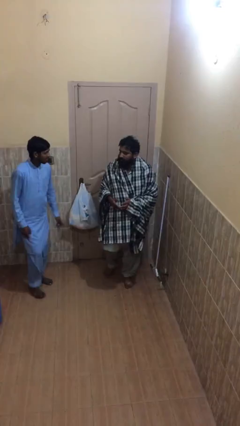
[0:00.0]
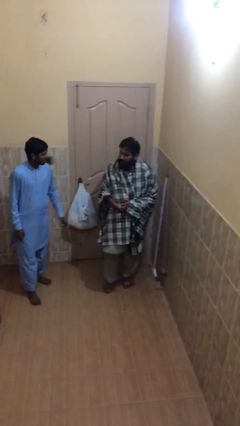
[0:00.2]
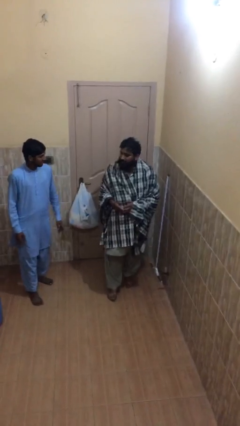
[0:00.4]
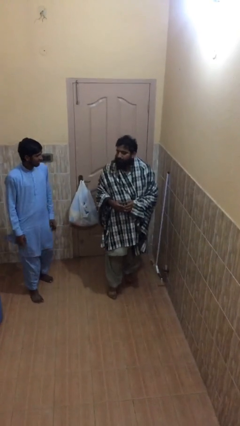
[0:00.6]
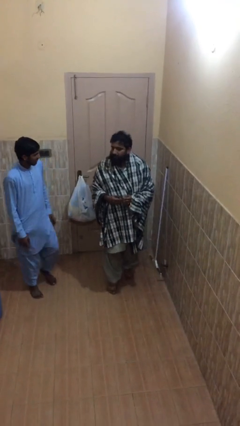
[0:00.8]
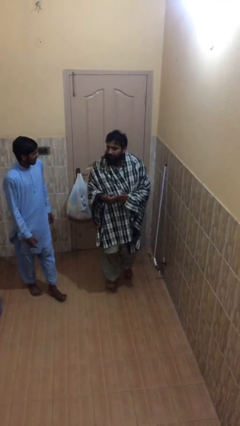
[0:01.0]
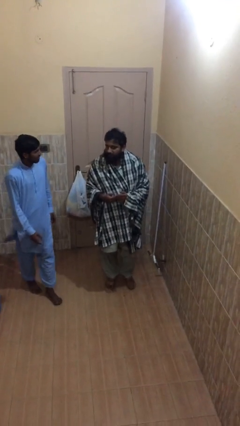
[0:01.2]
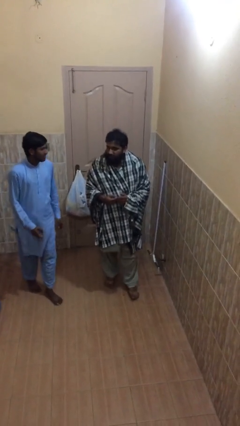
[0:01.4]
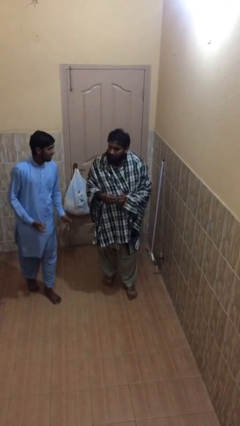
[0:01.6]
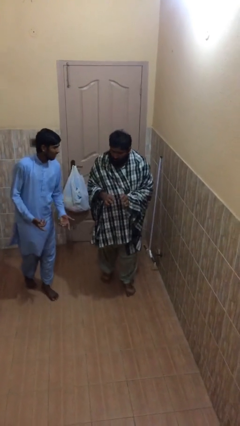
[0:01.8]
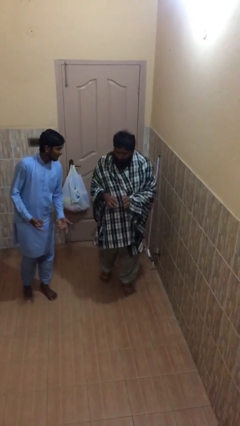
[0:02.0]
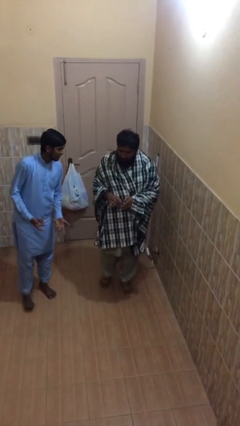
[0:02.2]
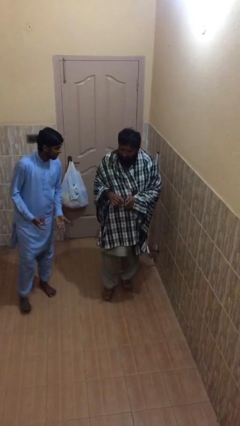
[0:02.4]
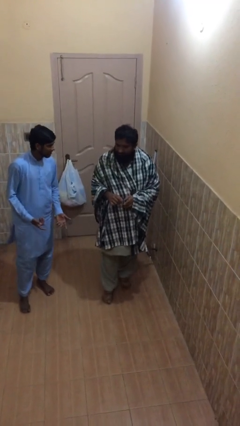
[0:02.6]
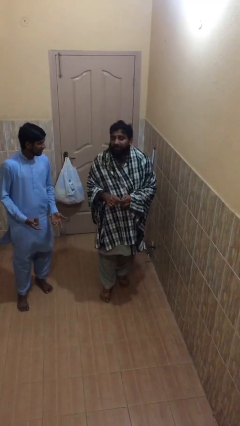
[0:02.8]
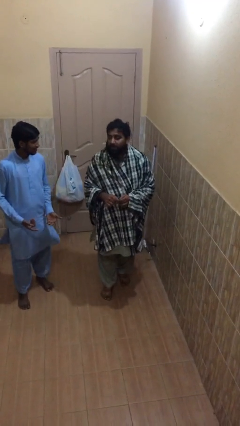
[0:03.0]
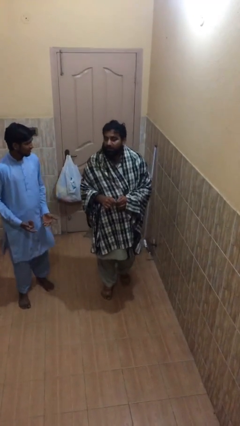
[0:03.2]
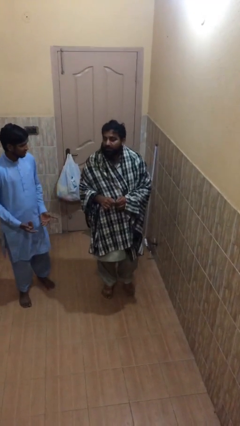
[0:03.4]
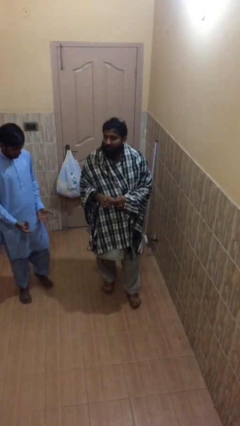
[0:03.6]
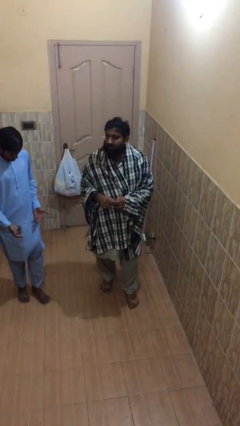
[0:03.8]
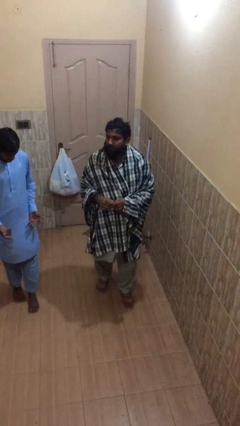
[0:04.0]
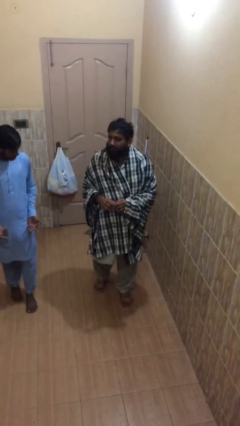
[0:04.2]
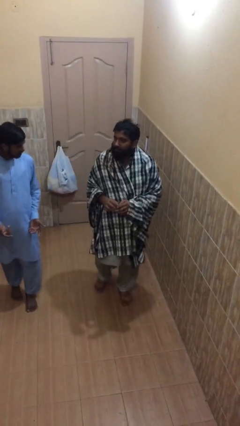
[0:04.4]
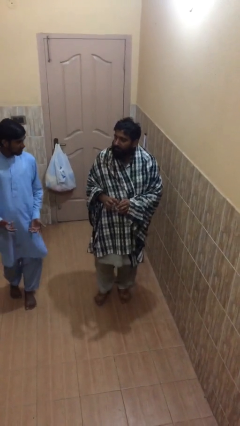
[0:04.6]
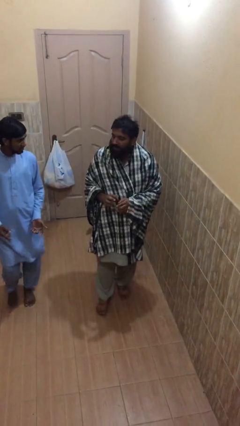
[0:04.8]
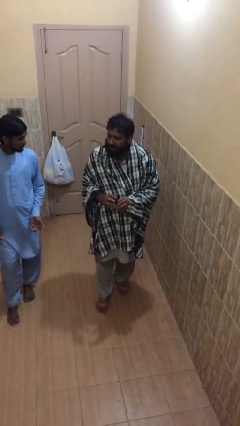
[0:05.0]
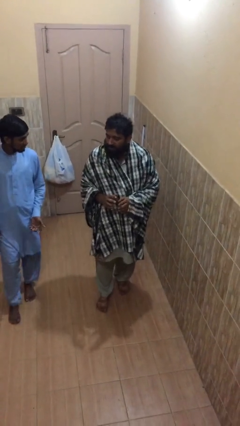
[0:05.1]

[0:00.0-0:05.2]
person talks to person

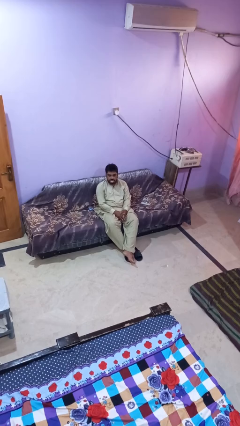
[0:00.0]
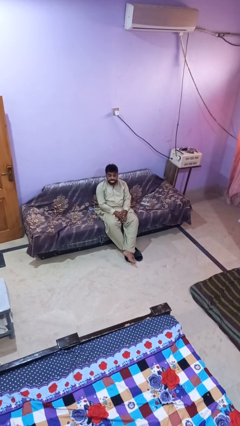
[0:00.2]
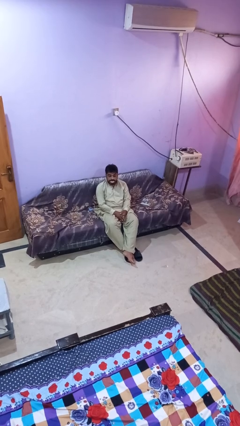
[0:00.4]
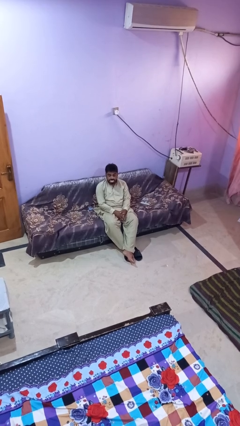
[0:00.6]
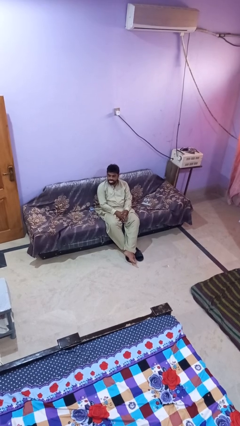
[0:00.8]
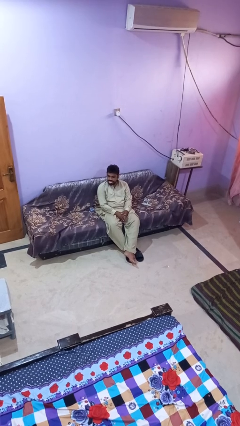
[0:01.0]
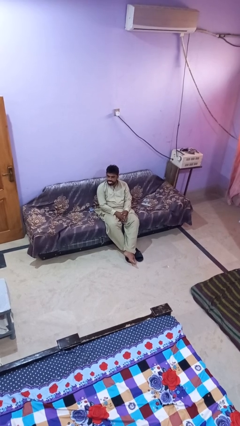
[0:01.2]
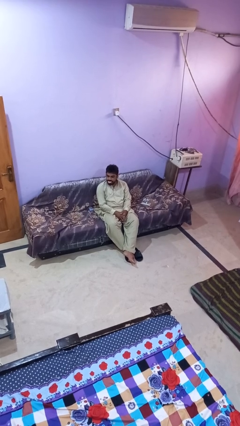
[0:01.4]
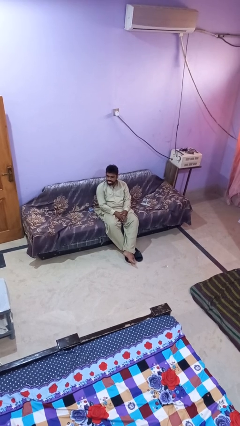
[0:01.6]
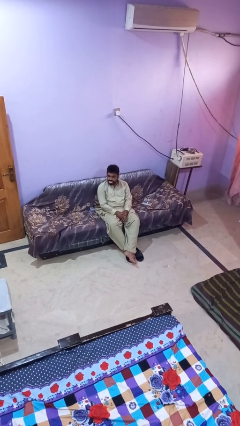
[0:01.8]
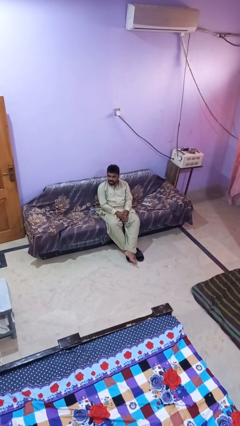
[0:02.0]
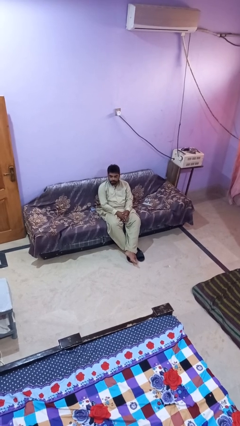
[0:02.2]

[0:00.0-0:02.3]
person sticks out tongue

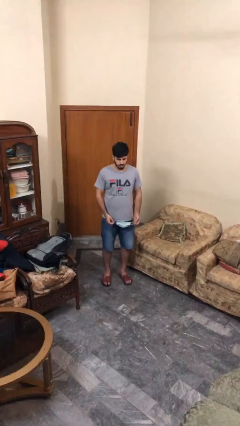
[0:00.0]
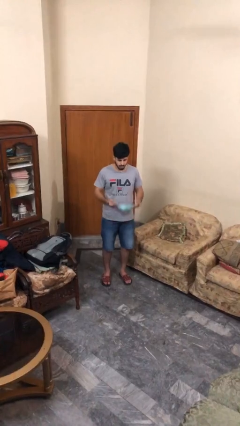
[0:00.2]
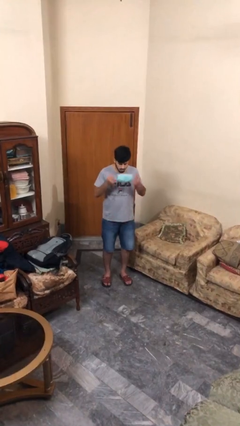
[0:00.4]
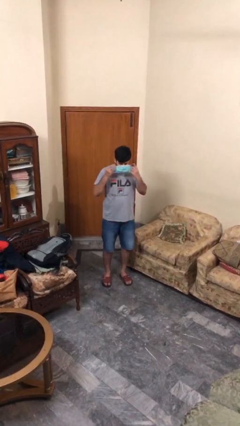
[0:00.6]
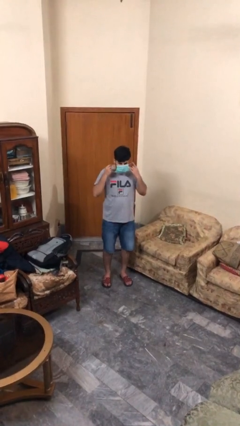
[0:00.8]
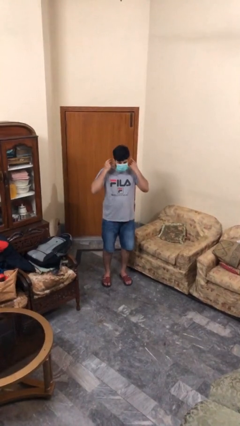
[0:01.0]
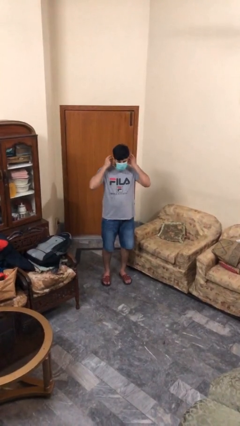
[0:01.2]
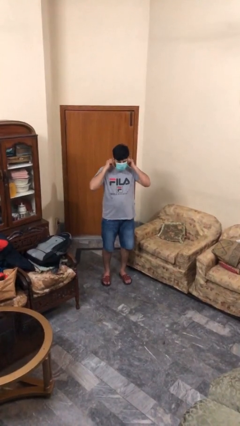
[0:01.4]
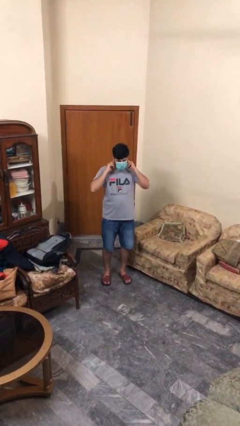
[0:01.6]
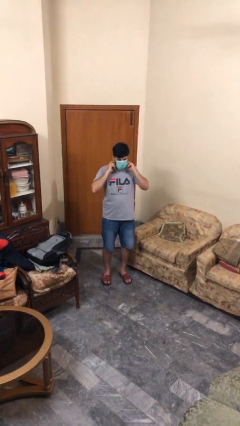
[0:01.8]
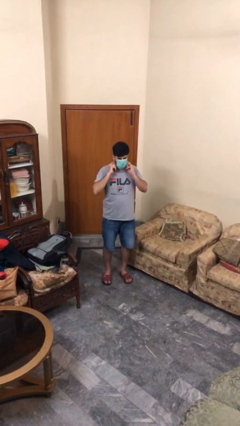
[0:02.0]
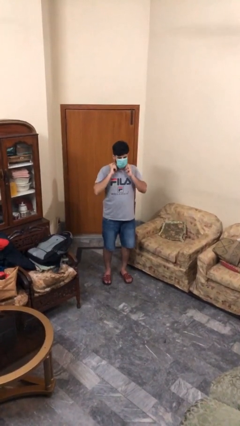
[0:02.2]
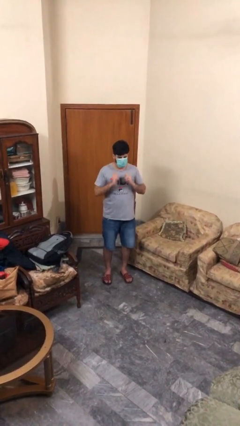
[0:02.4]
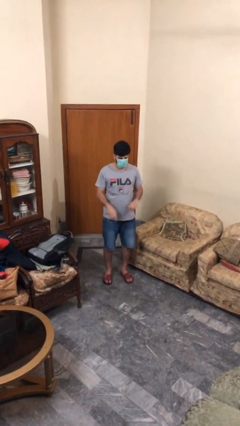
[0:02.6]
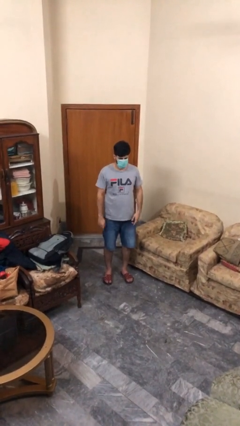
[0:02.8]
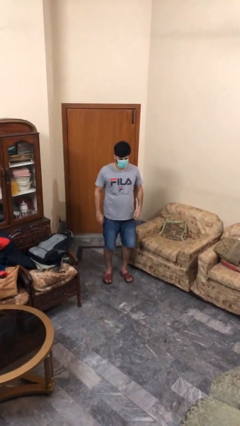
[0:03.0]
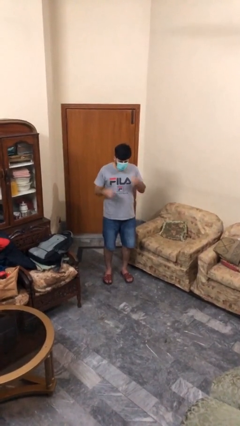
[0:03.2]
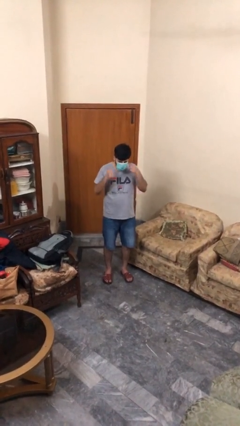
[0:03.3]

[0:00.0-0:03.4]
person puts on facemask

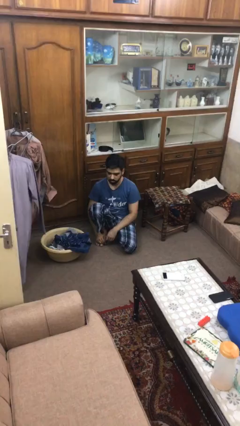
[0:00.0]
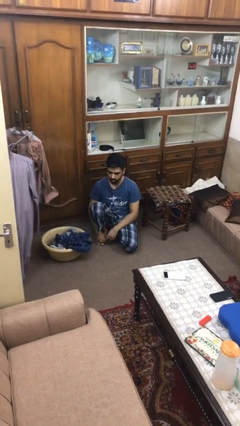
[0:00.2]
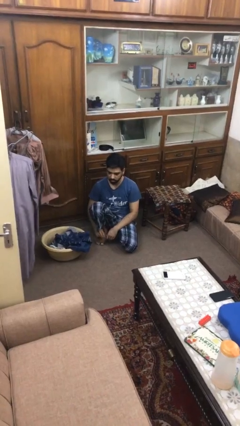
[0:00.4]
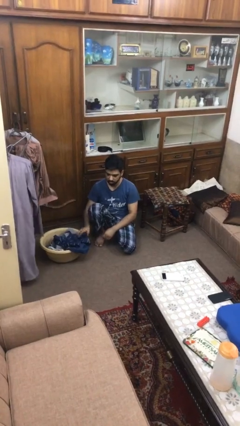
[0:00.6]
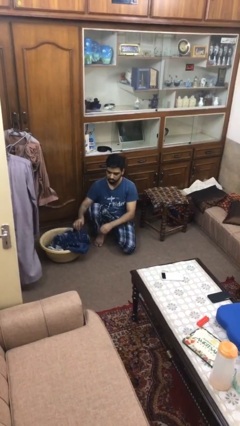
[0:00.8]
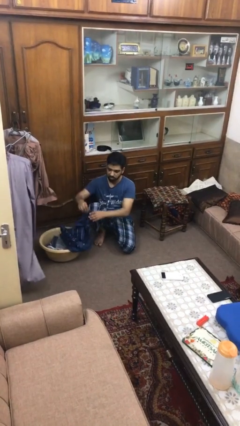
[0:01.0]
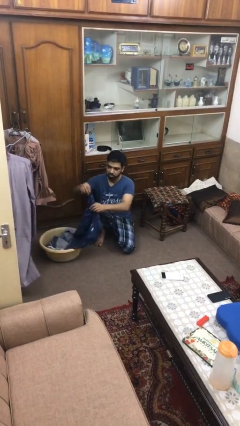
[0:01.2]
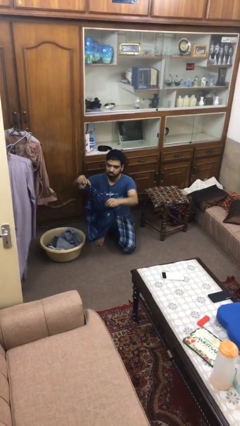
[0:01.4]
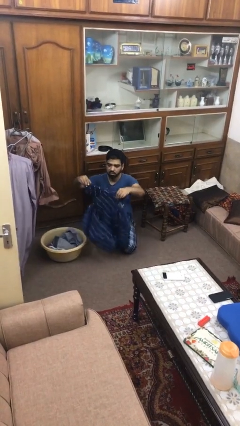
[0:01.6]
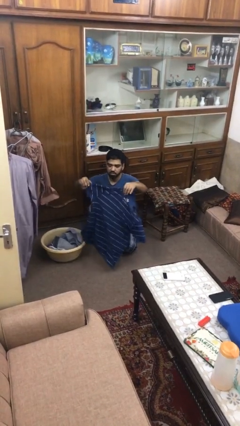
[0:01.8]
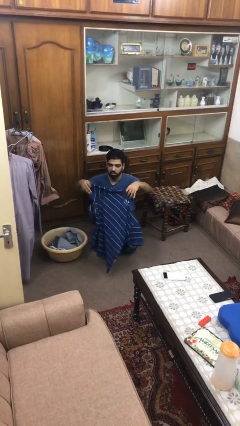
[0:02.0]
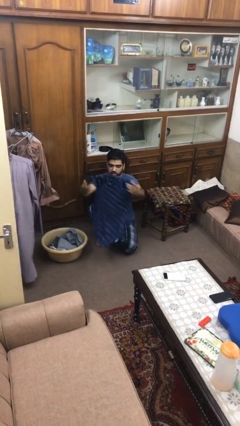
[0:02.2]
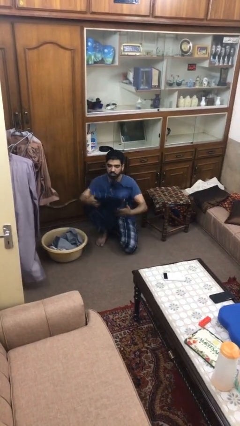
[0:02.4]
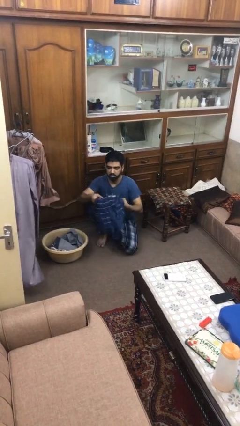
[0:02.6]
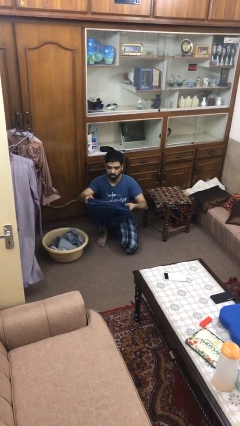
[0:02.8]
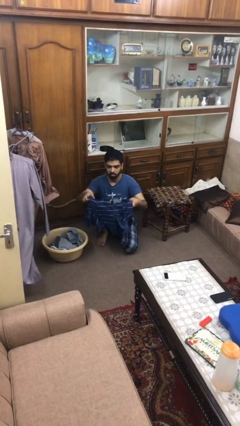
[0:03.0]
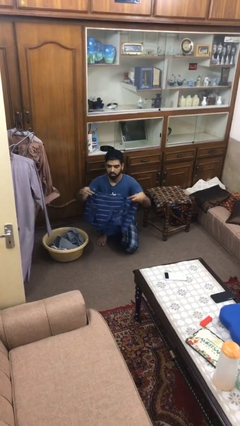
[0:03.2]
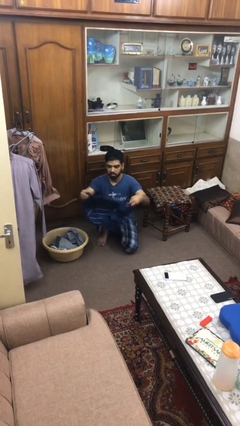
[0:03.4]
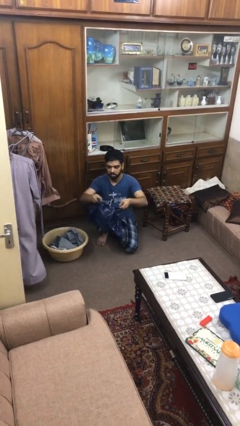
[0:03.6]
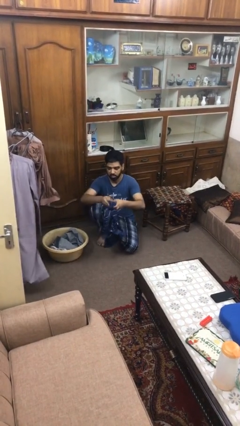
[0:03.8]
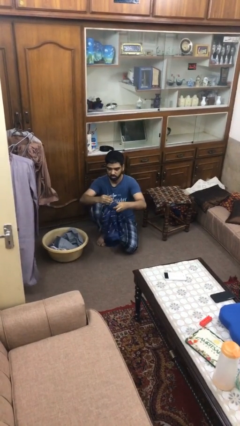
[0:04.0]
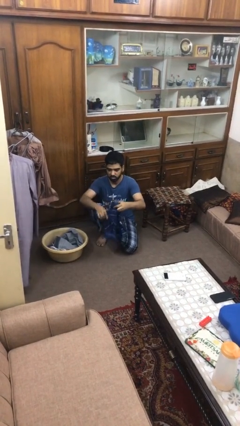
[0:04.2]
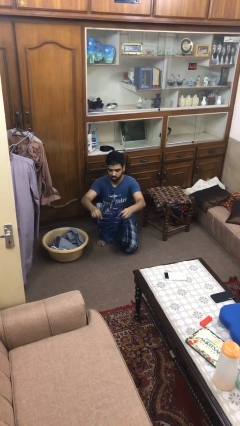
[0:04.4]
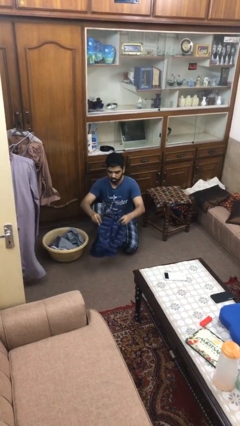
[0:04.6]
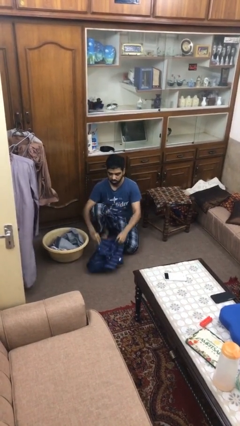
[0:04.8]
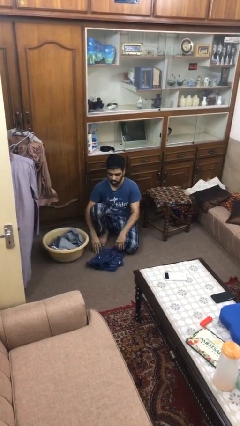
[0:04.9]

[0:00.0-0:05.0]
person folds shirt

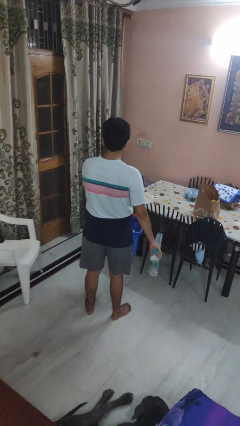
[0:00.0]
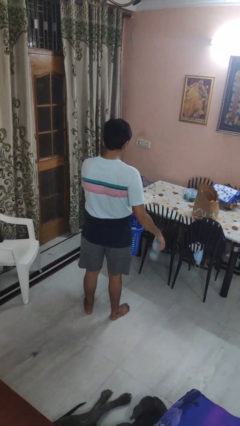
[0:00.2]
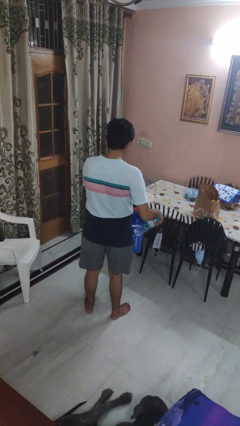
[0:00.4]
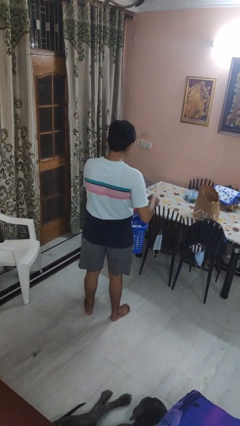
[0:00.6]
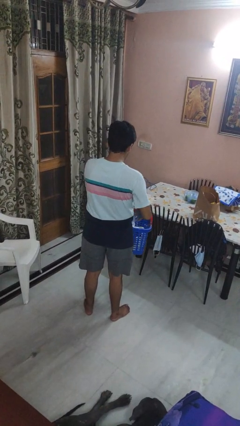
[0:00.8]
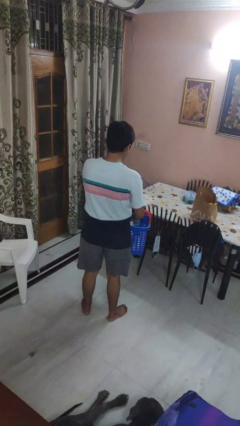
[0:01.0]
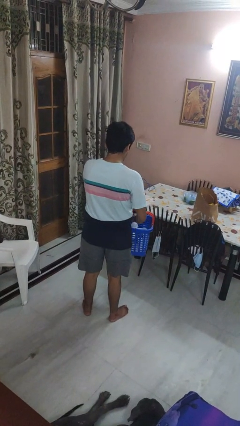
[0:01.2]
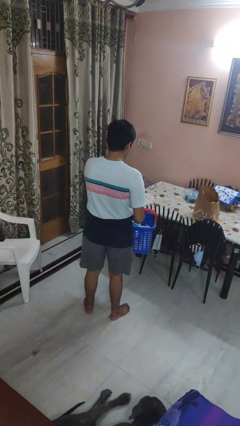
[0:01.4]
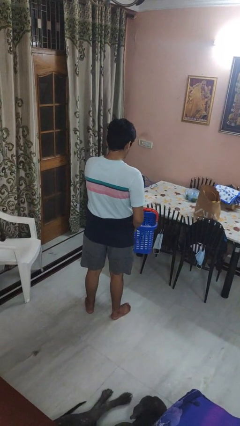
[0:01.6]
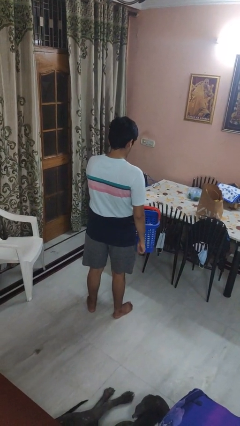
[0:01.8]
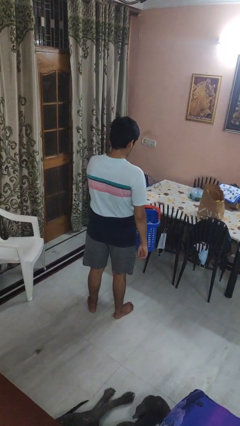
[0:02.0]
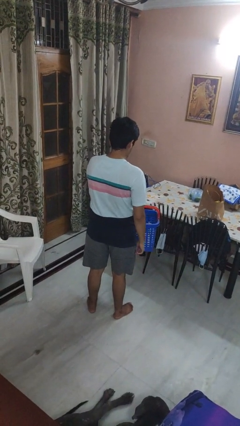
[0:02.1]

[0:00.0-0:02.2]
person puts object into basket
